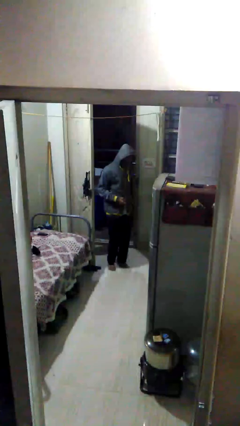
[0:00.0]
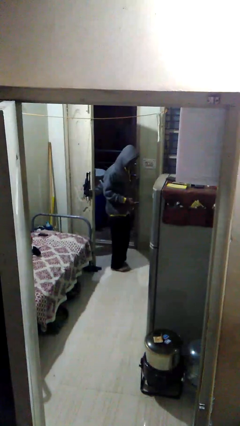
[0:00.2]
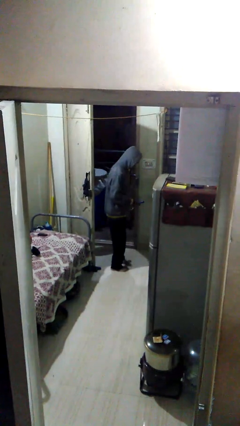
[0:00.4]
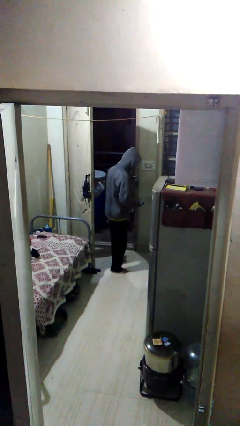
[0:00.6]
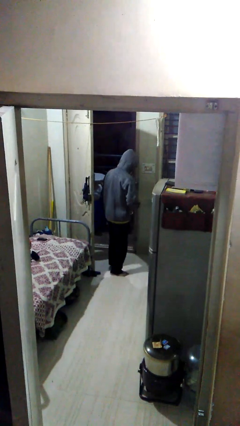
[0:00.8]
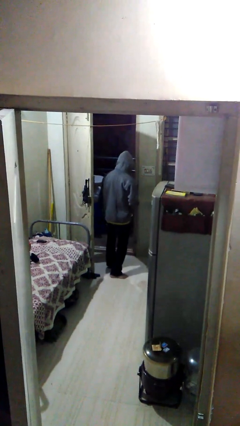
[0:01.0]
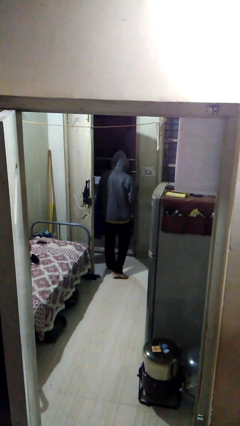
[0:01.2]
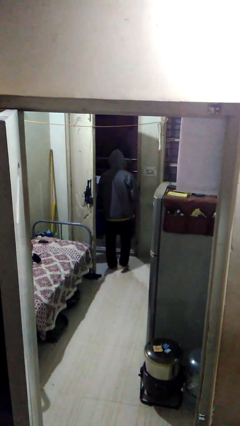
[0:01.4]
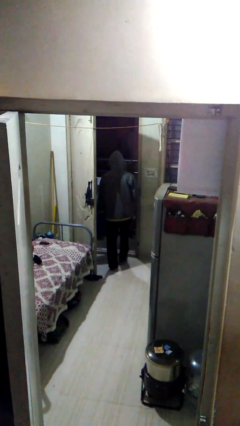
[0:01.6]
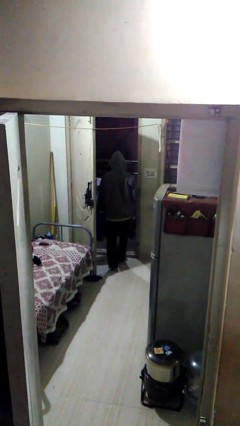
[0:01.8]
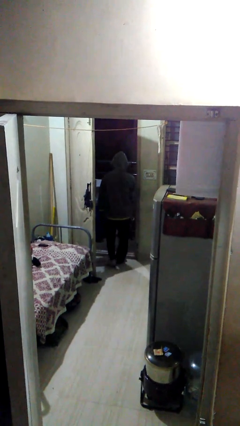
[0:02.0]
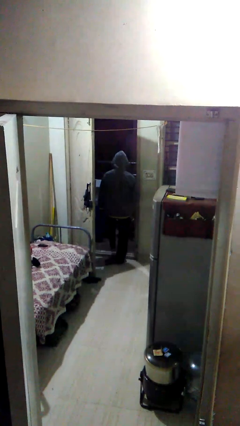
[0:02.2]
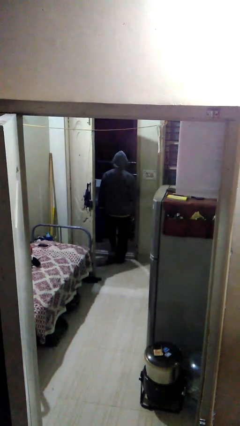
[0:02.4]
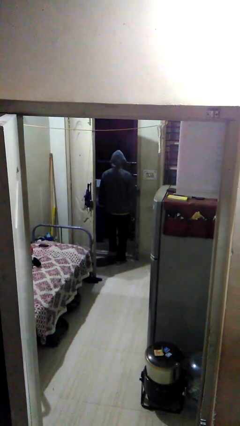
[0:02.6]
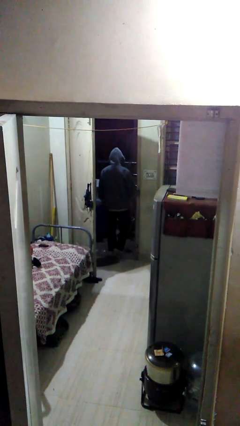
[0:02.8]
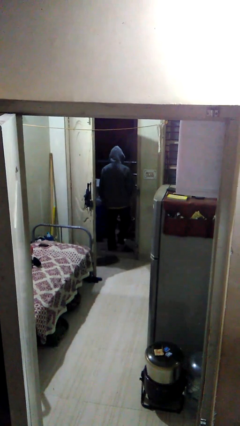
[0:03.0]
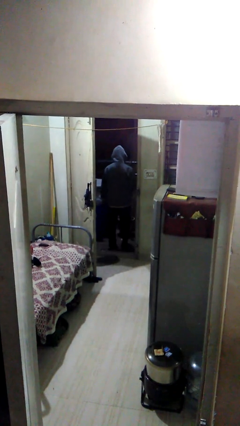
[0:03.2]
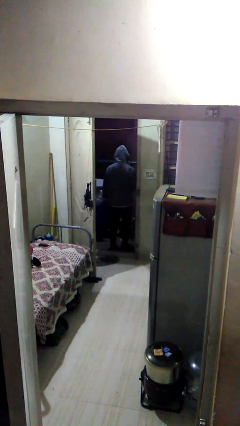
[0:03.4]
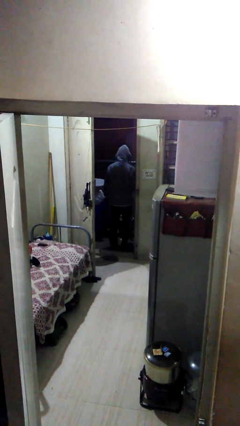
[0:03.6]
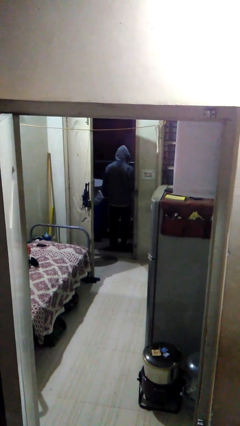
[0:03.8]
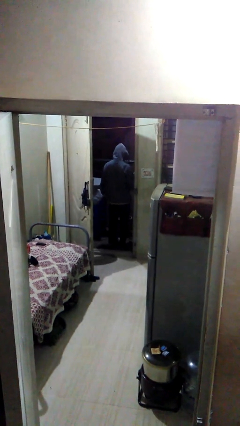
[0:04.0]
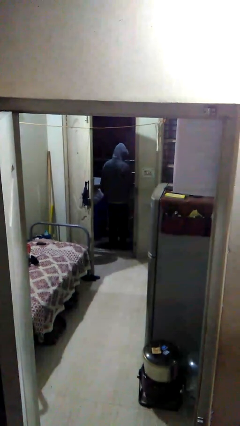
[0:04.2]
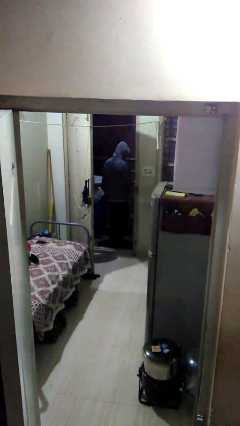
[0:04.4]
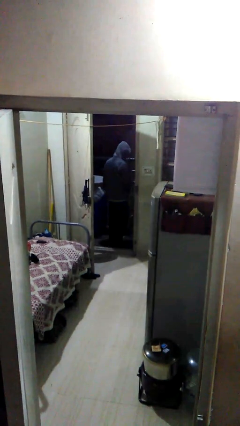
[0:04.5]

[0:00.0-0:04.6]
person exits scene through structure

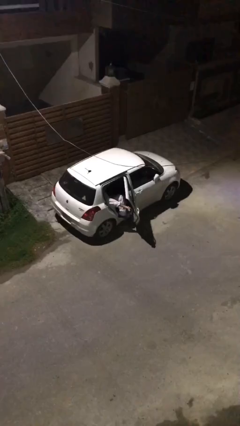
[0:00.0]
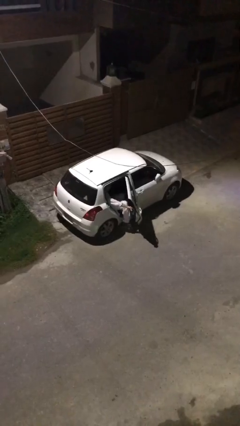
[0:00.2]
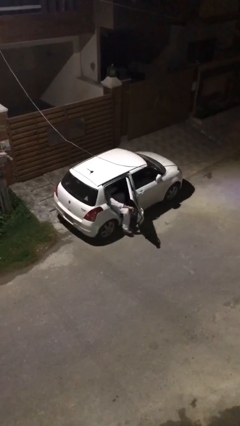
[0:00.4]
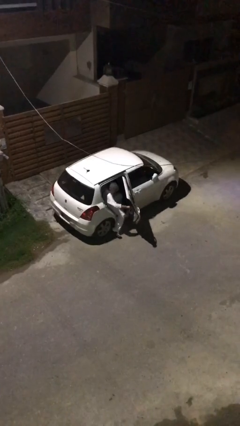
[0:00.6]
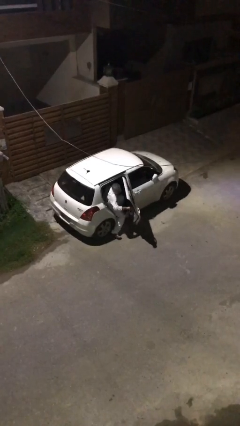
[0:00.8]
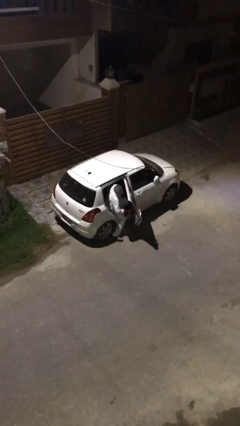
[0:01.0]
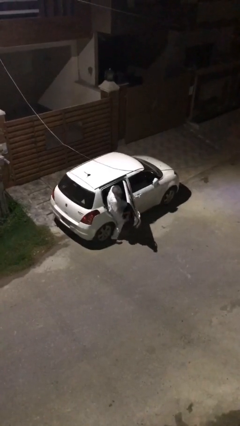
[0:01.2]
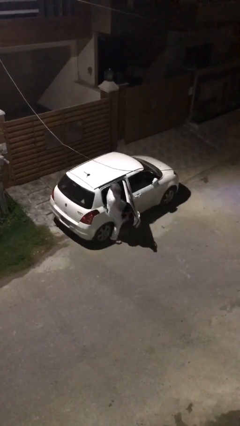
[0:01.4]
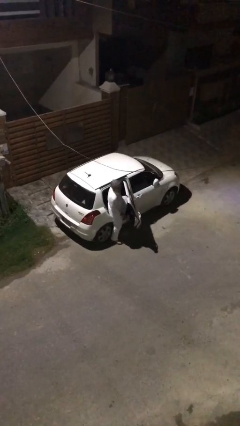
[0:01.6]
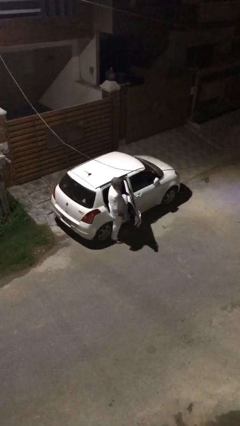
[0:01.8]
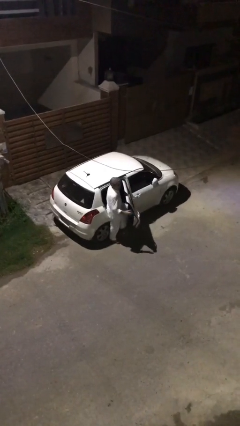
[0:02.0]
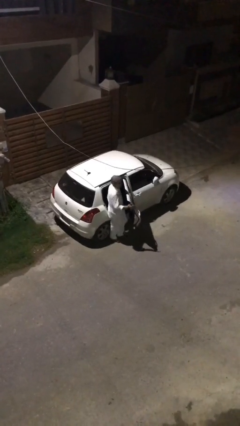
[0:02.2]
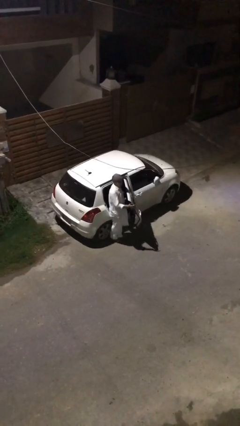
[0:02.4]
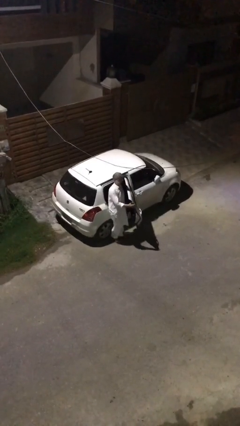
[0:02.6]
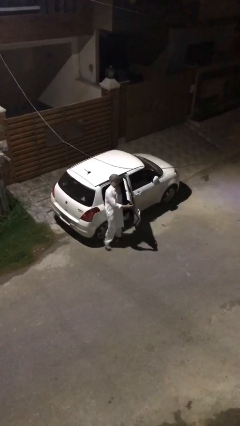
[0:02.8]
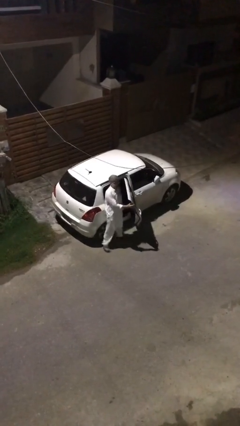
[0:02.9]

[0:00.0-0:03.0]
person exits car

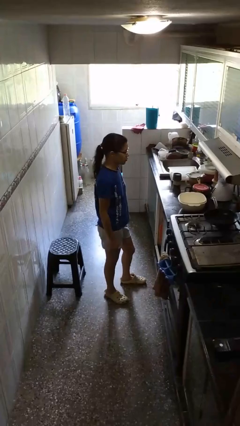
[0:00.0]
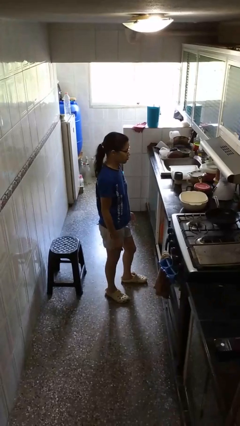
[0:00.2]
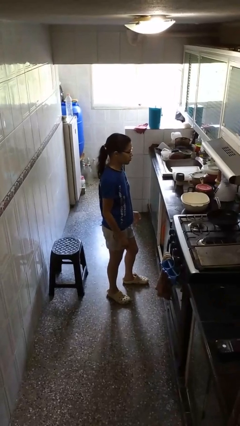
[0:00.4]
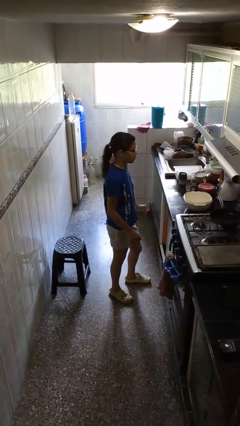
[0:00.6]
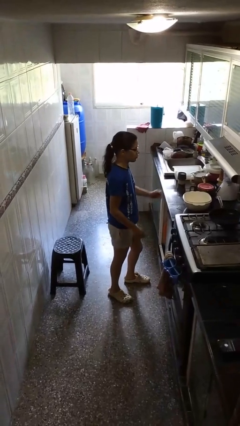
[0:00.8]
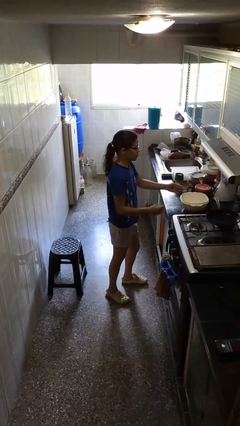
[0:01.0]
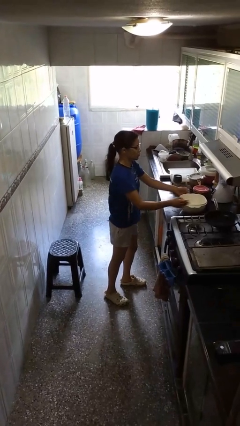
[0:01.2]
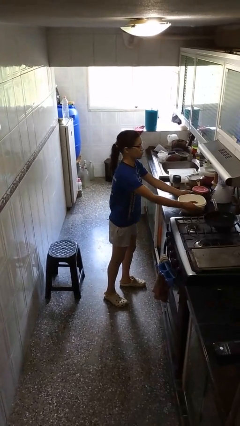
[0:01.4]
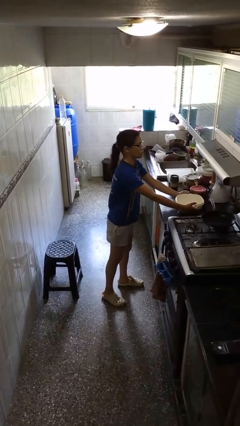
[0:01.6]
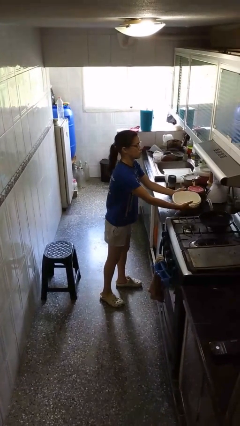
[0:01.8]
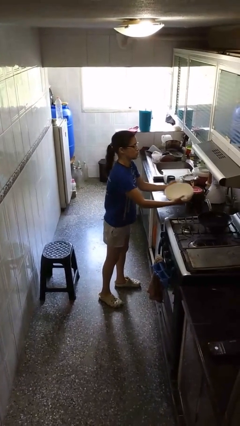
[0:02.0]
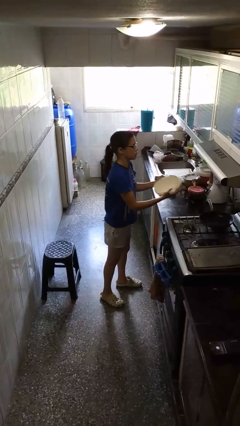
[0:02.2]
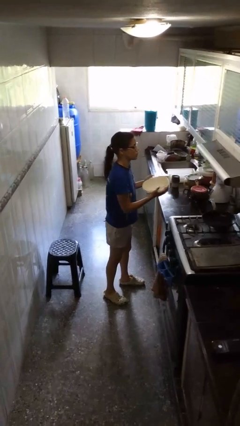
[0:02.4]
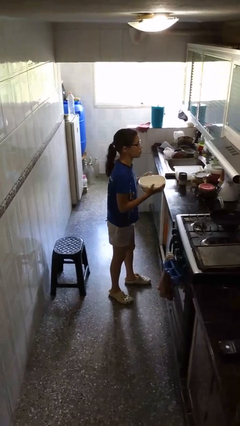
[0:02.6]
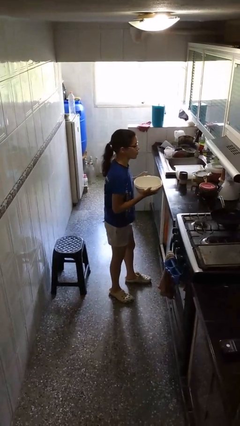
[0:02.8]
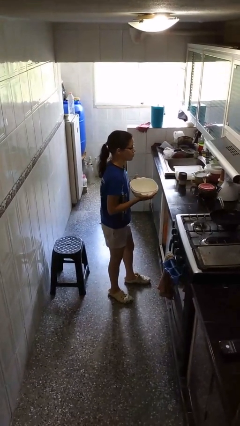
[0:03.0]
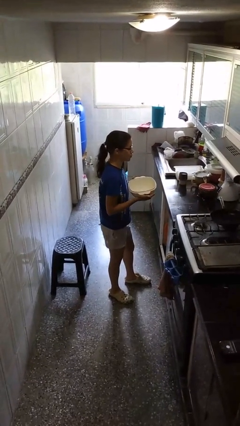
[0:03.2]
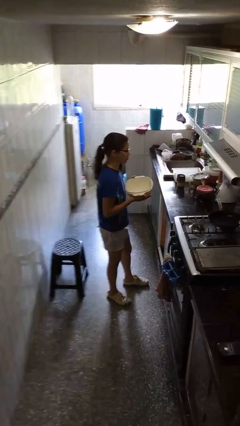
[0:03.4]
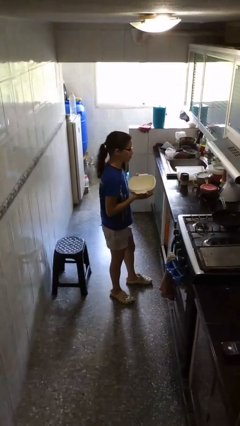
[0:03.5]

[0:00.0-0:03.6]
person picks up object from countertop

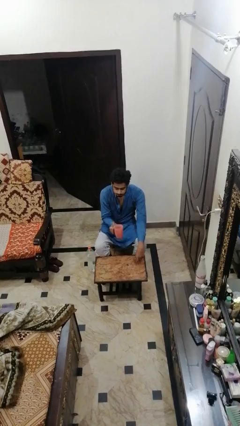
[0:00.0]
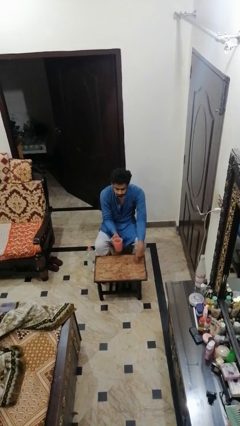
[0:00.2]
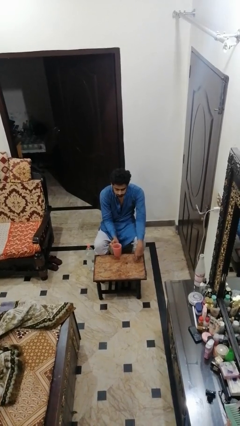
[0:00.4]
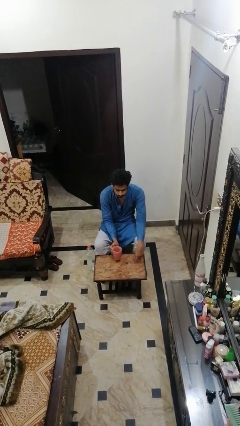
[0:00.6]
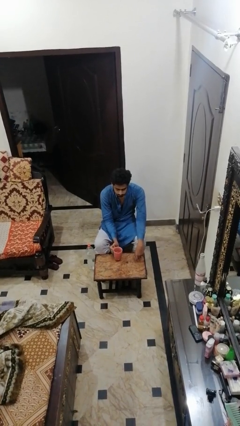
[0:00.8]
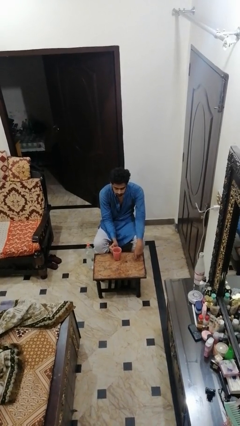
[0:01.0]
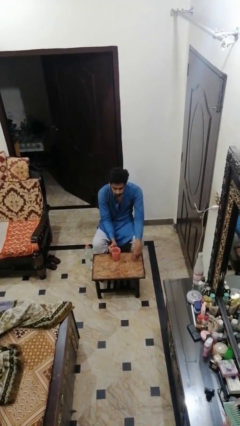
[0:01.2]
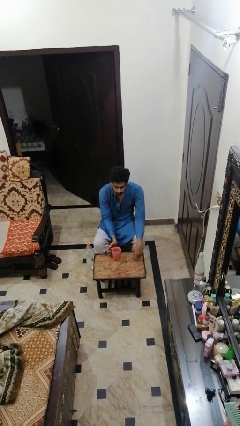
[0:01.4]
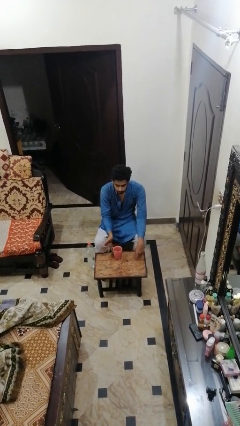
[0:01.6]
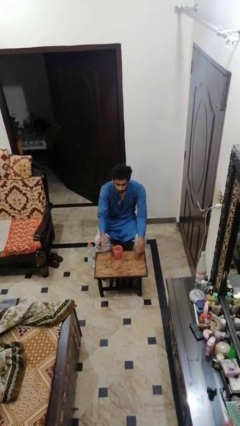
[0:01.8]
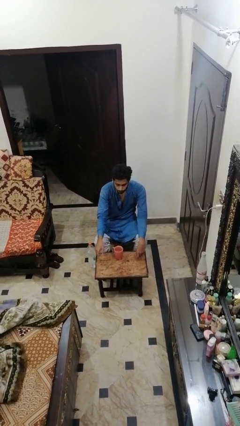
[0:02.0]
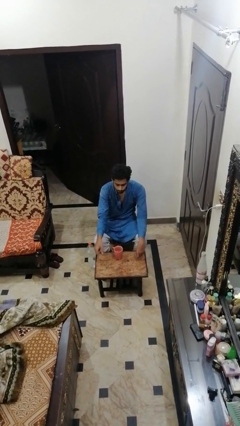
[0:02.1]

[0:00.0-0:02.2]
person puts down object on table

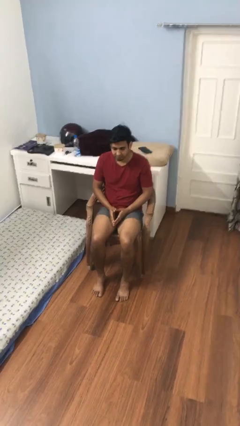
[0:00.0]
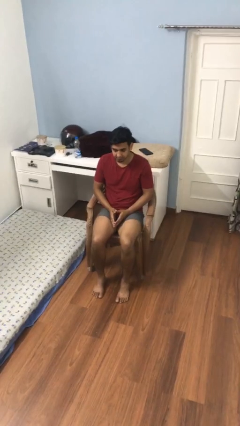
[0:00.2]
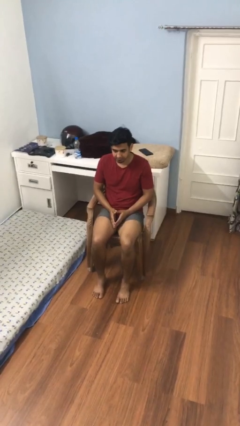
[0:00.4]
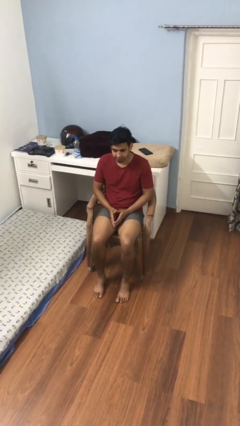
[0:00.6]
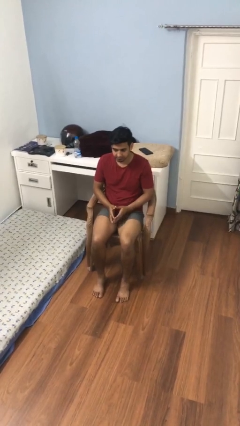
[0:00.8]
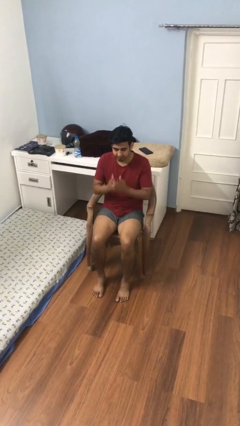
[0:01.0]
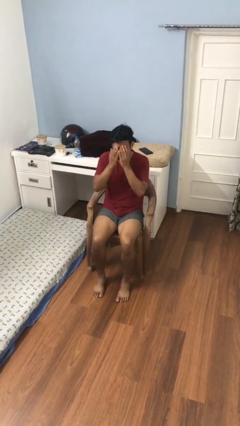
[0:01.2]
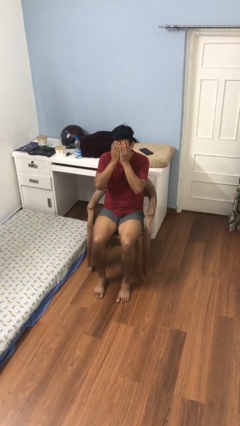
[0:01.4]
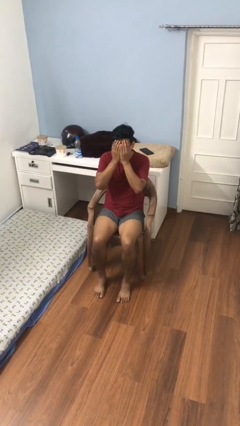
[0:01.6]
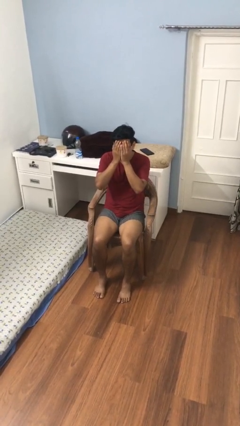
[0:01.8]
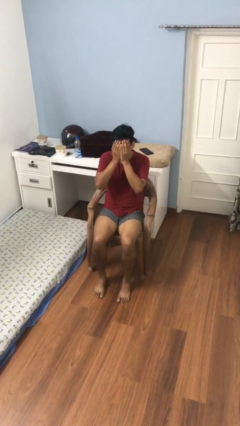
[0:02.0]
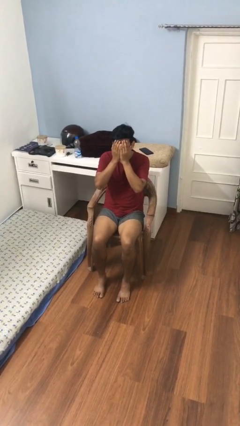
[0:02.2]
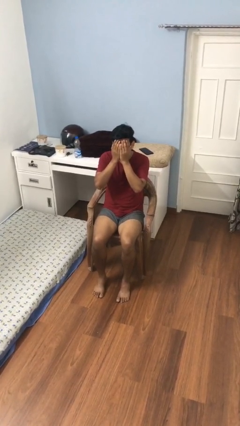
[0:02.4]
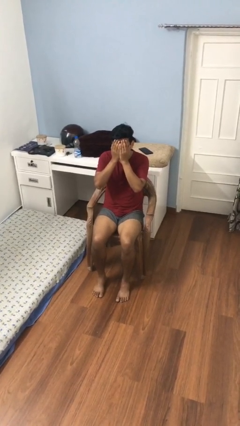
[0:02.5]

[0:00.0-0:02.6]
person covers face with hands

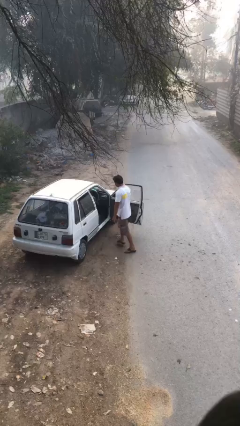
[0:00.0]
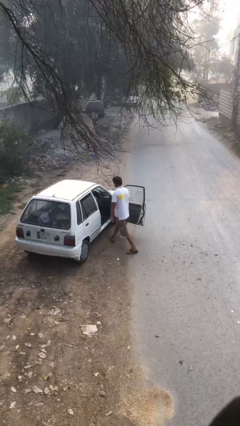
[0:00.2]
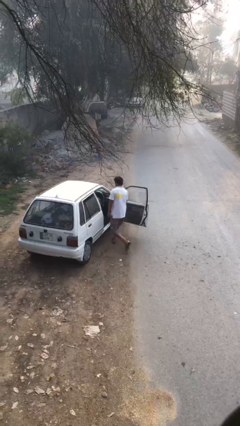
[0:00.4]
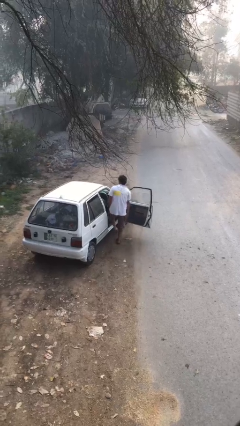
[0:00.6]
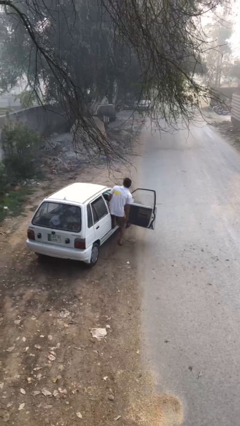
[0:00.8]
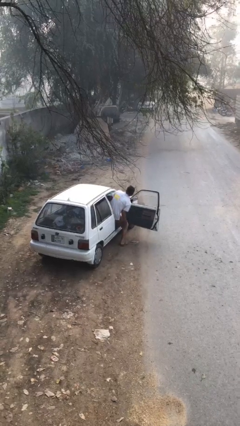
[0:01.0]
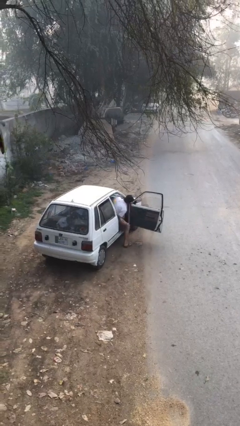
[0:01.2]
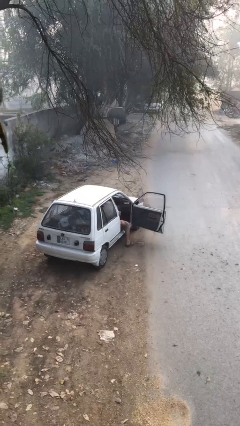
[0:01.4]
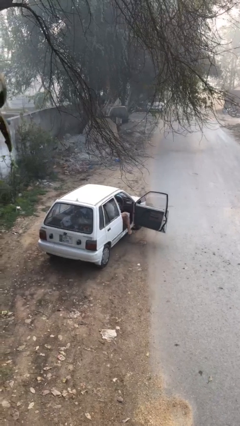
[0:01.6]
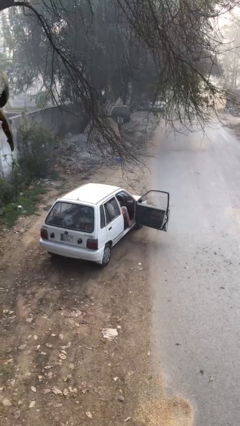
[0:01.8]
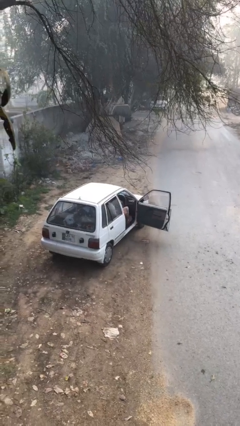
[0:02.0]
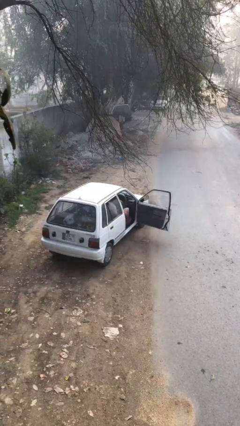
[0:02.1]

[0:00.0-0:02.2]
person enters car
